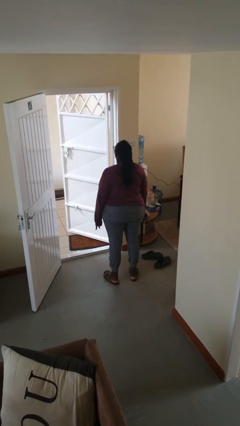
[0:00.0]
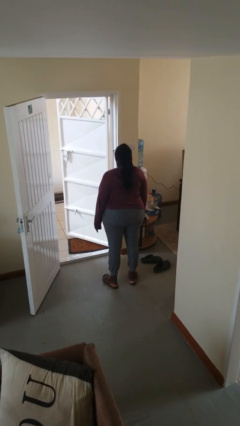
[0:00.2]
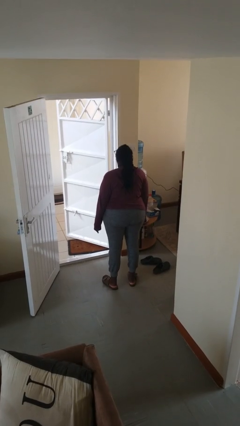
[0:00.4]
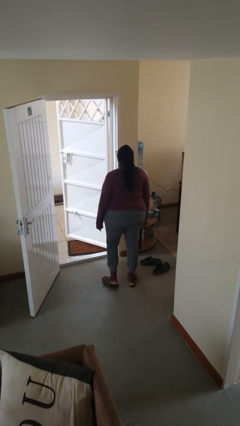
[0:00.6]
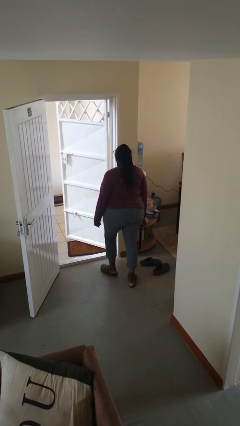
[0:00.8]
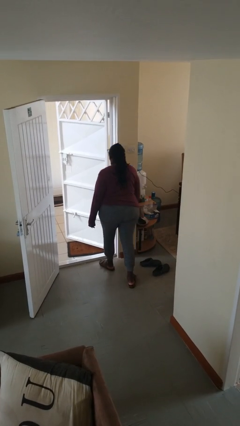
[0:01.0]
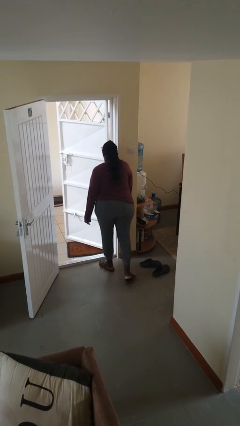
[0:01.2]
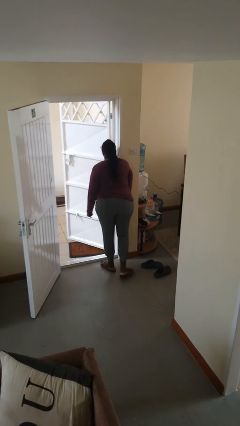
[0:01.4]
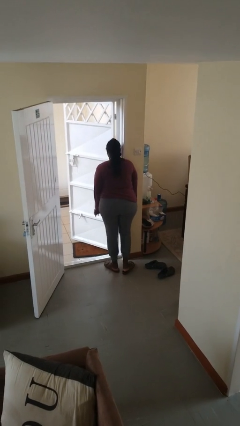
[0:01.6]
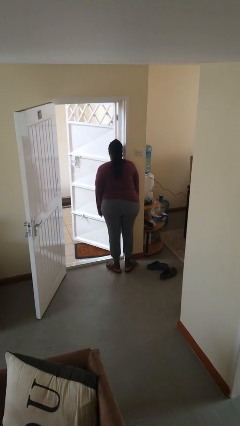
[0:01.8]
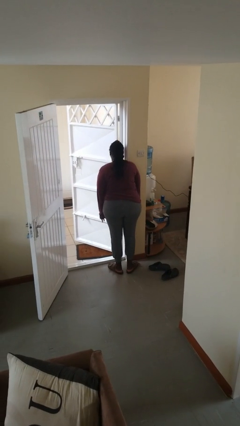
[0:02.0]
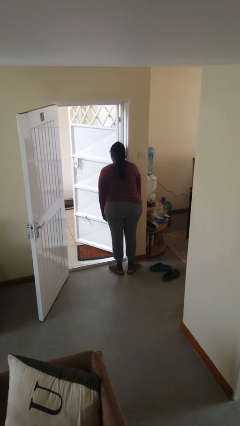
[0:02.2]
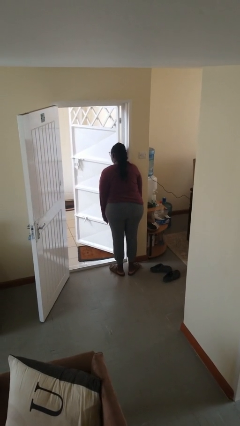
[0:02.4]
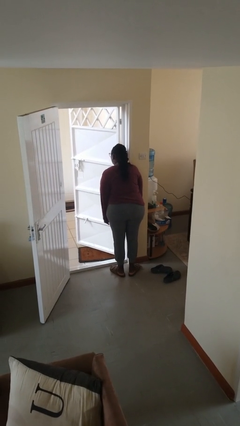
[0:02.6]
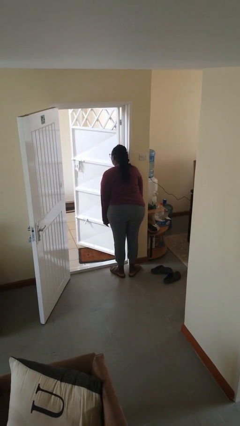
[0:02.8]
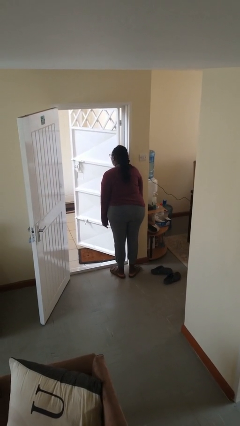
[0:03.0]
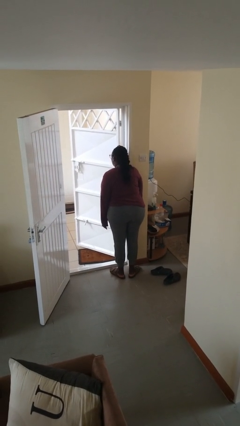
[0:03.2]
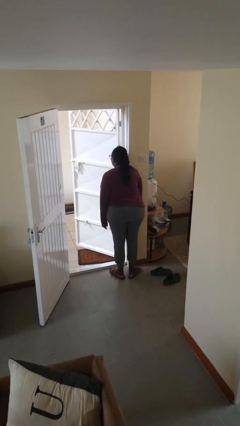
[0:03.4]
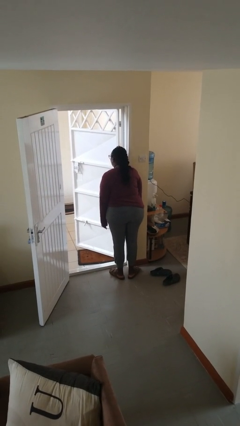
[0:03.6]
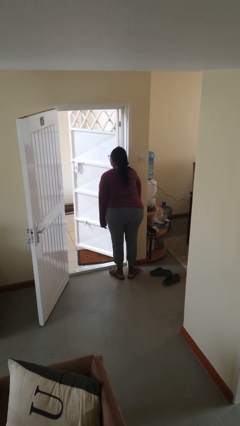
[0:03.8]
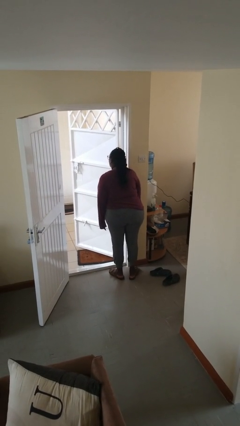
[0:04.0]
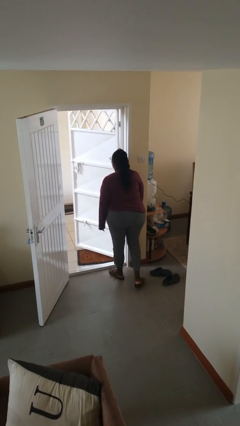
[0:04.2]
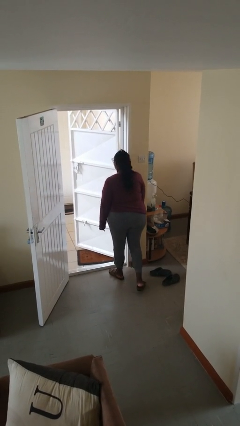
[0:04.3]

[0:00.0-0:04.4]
person bumps into wall

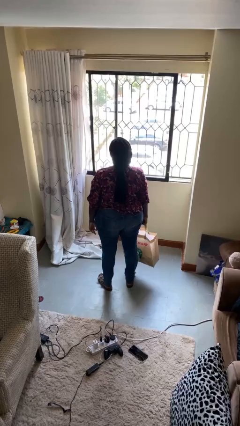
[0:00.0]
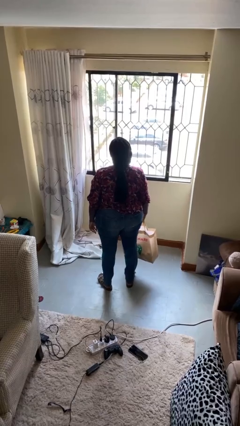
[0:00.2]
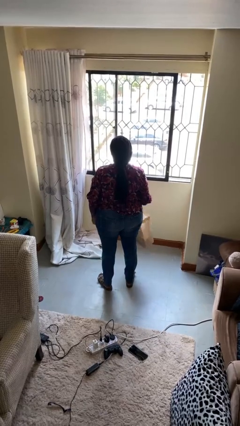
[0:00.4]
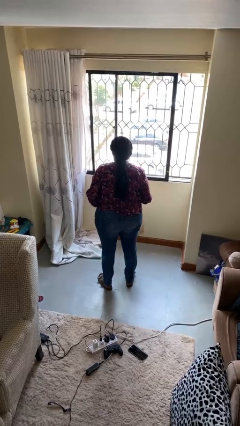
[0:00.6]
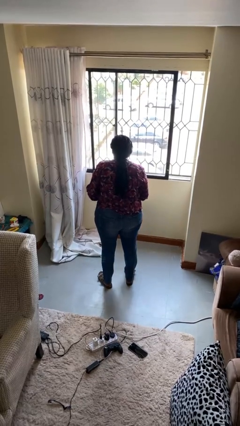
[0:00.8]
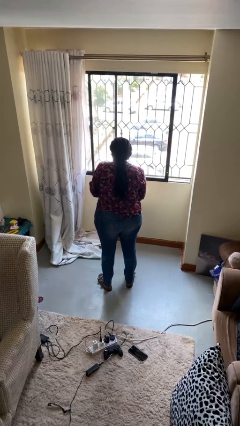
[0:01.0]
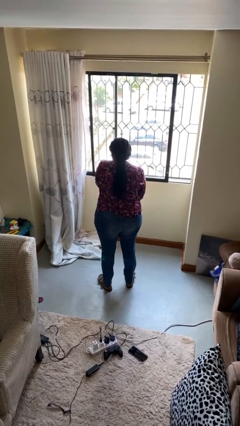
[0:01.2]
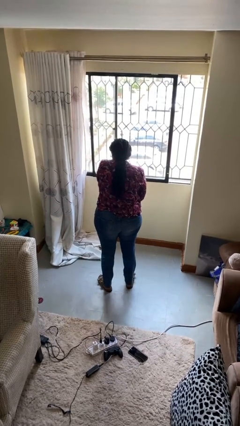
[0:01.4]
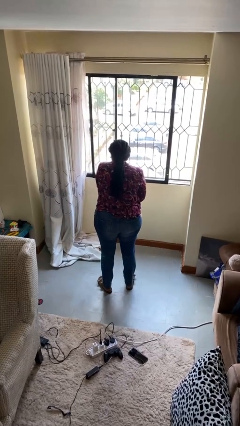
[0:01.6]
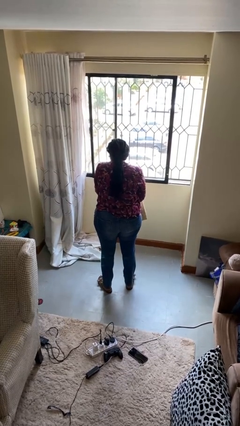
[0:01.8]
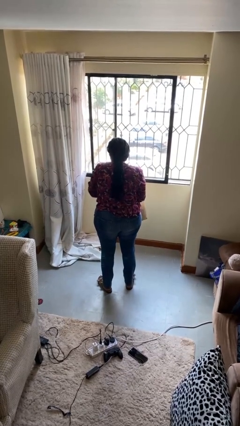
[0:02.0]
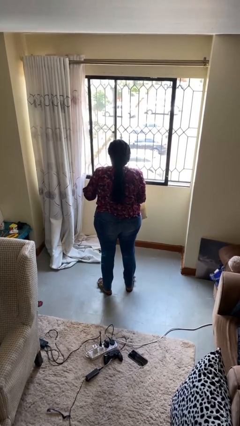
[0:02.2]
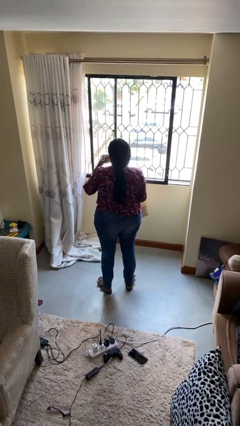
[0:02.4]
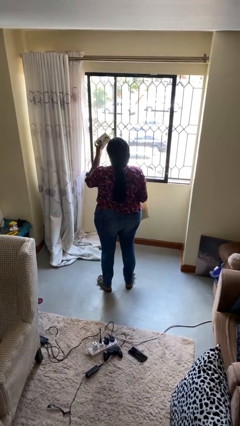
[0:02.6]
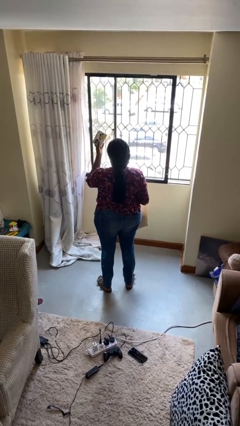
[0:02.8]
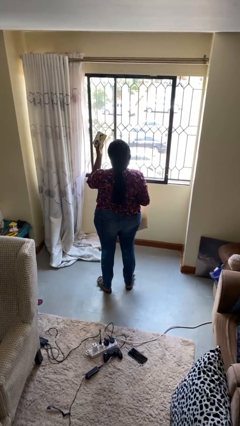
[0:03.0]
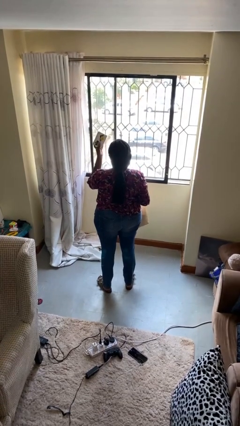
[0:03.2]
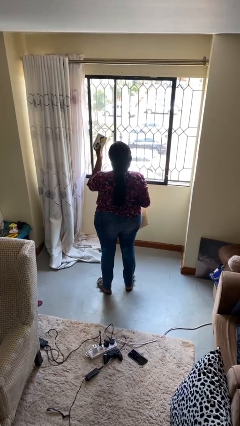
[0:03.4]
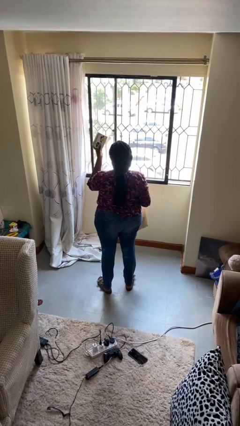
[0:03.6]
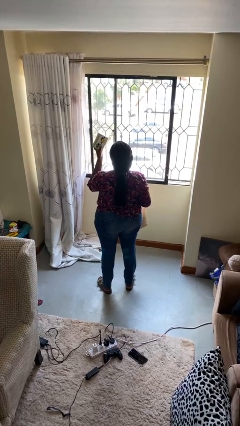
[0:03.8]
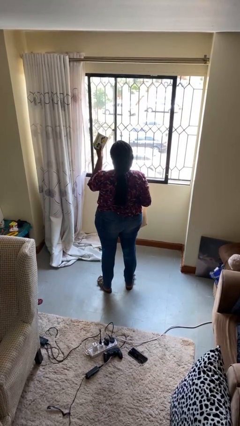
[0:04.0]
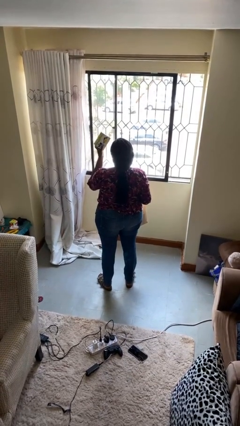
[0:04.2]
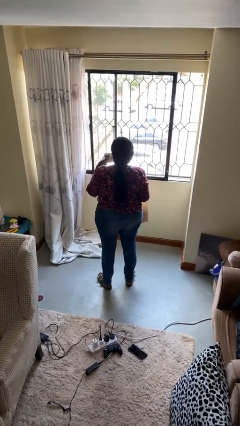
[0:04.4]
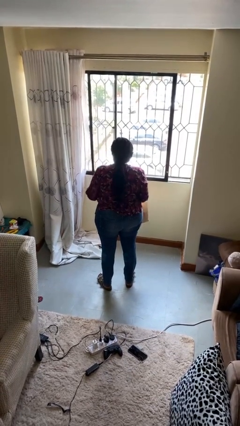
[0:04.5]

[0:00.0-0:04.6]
person takes object from bag

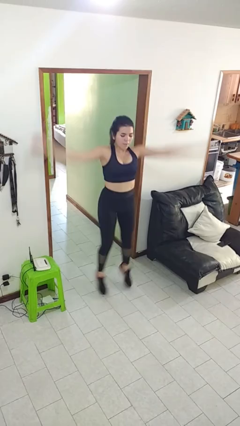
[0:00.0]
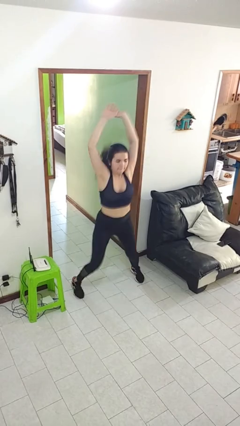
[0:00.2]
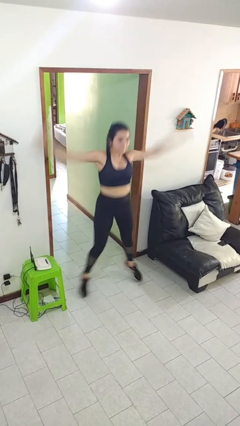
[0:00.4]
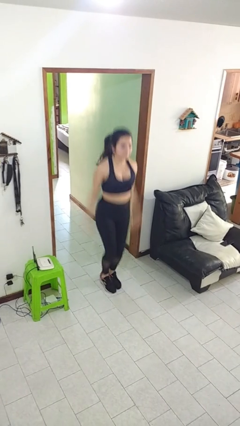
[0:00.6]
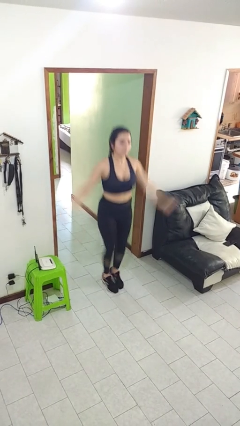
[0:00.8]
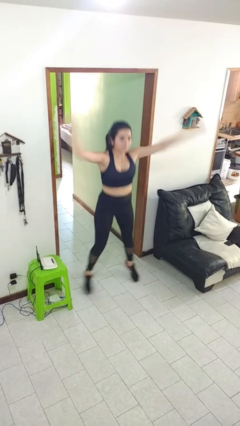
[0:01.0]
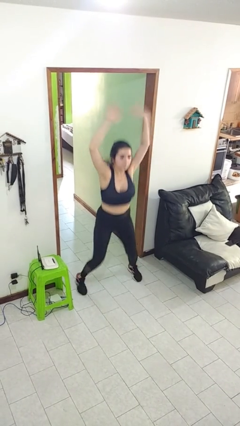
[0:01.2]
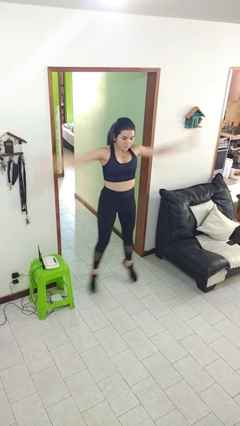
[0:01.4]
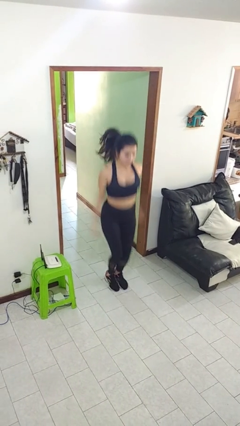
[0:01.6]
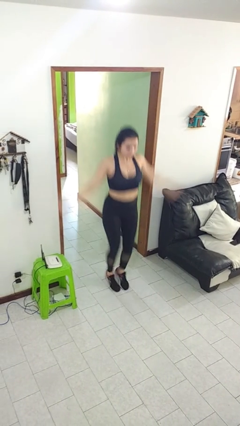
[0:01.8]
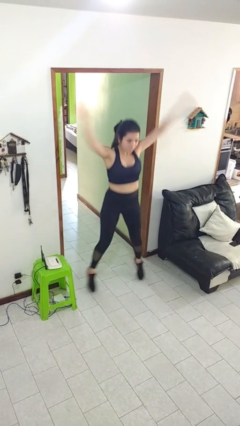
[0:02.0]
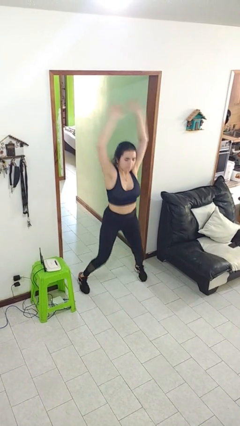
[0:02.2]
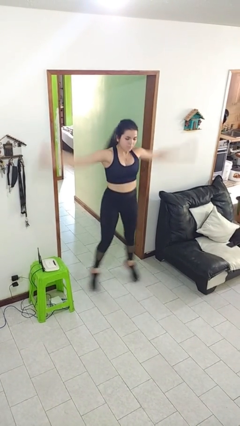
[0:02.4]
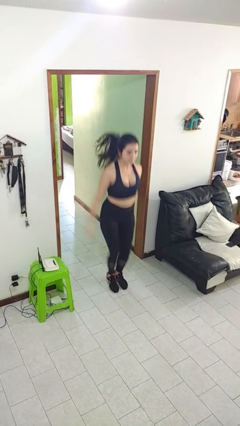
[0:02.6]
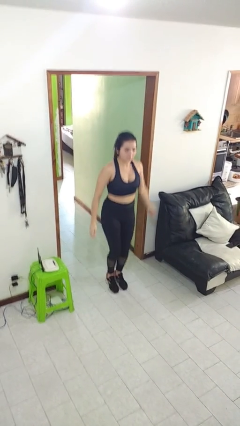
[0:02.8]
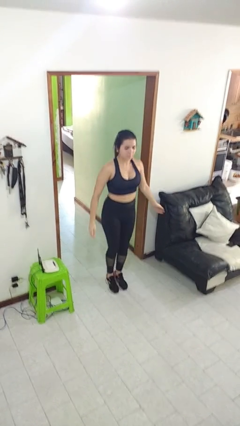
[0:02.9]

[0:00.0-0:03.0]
person exercises with jumping jacks

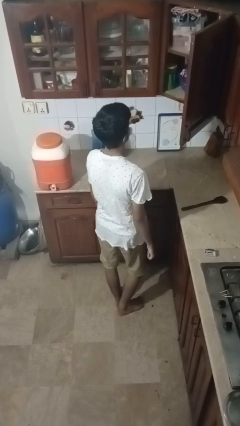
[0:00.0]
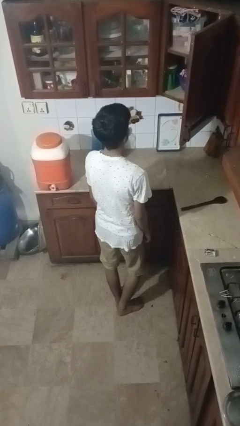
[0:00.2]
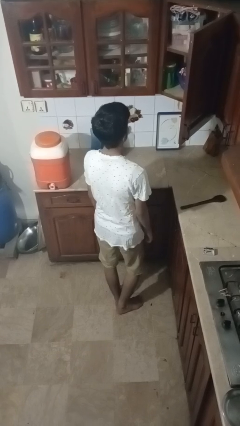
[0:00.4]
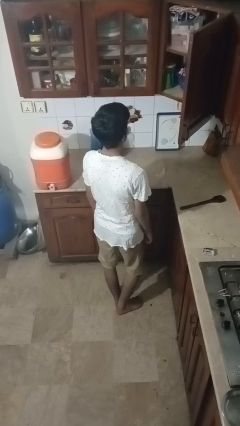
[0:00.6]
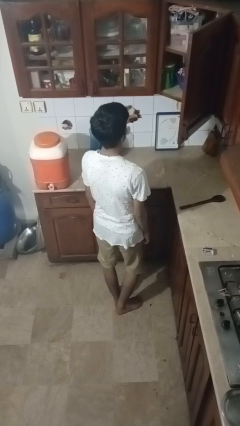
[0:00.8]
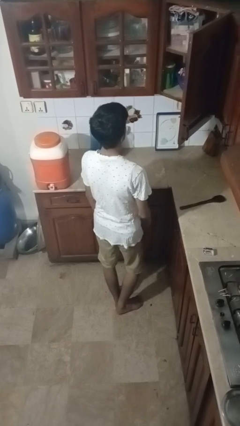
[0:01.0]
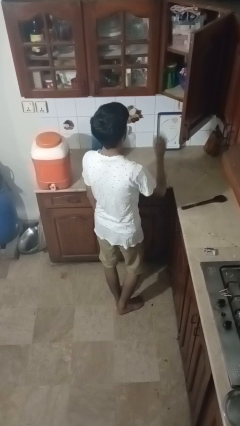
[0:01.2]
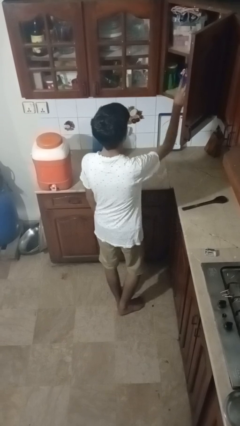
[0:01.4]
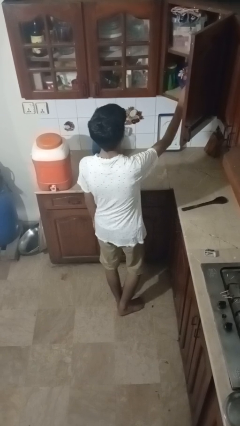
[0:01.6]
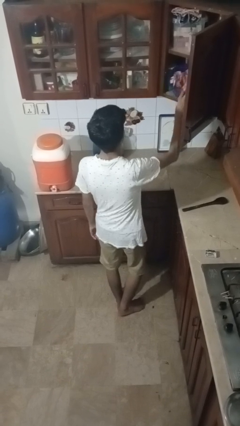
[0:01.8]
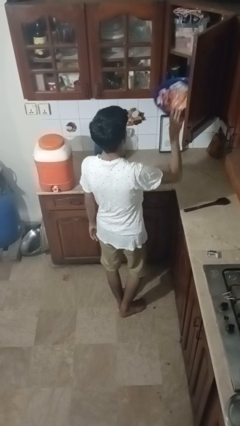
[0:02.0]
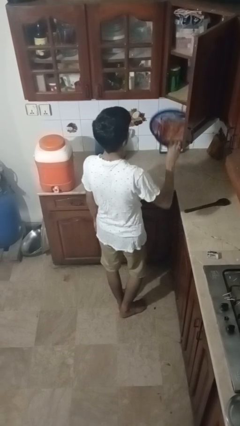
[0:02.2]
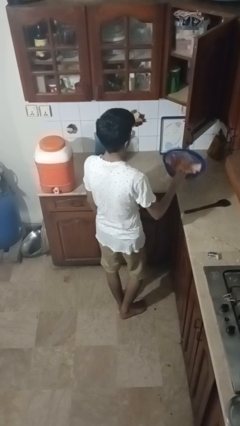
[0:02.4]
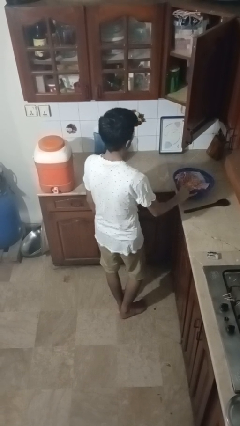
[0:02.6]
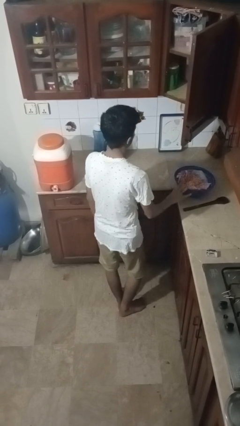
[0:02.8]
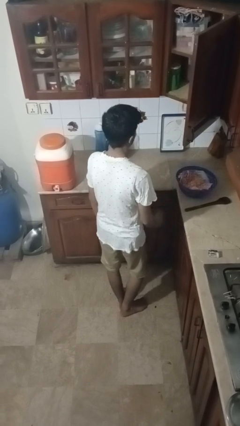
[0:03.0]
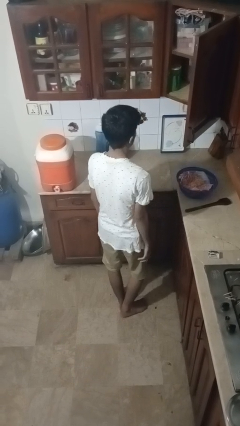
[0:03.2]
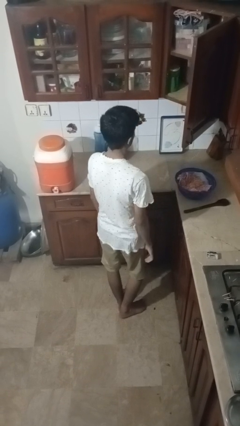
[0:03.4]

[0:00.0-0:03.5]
person takes object from cabinet

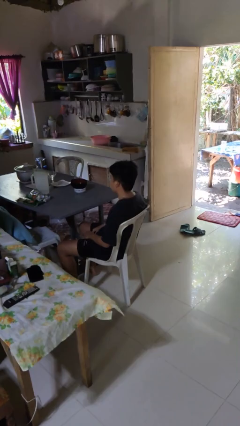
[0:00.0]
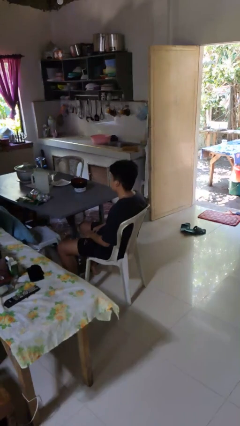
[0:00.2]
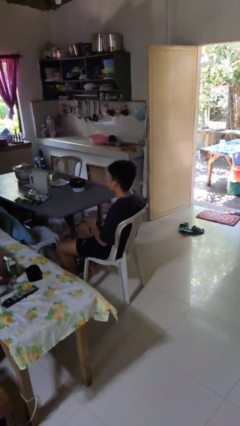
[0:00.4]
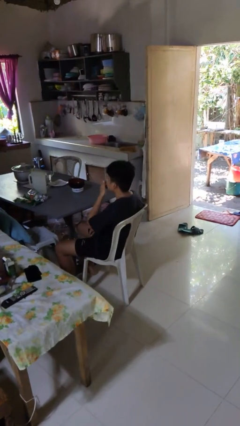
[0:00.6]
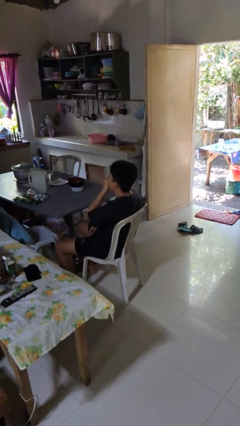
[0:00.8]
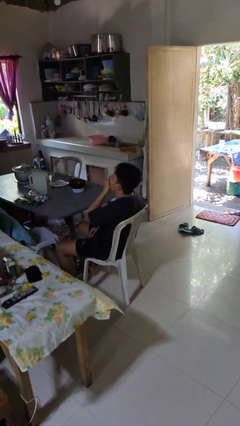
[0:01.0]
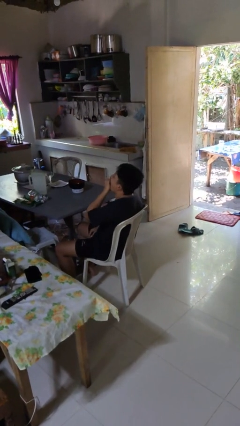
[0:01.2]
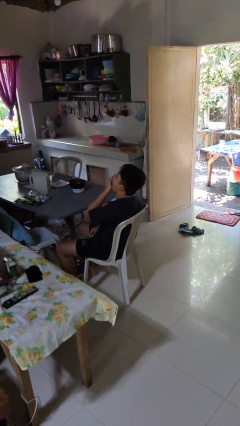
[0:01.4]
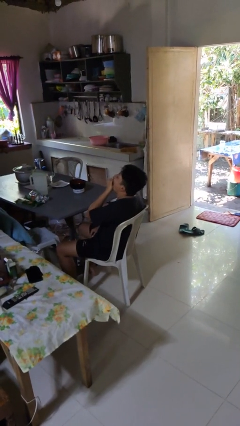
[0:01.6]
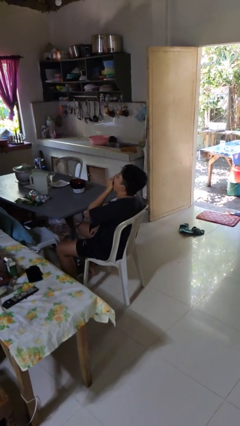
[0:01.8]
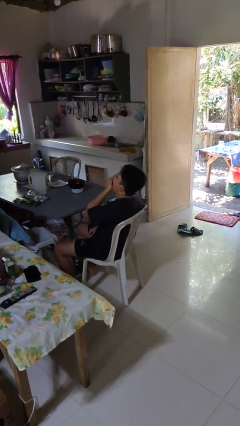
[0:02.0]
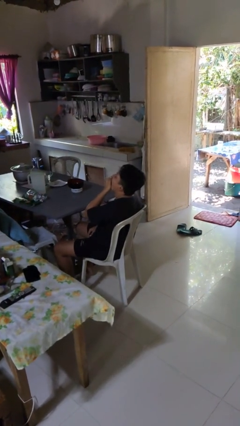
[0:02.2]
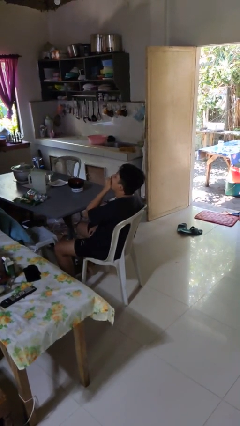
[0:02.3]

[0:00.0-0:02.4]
person yawns
